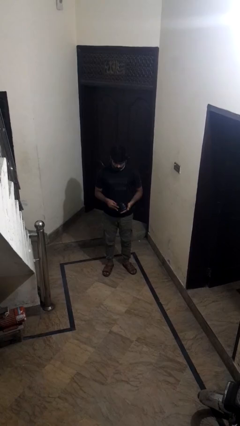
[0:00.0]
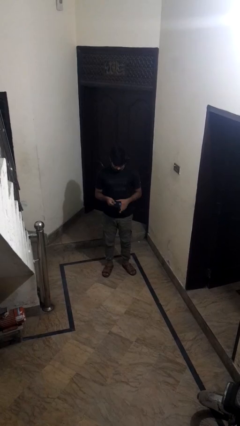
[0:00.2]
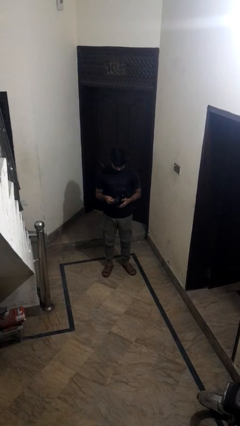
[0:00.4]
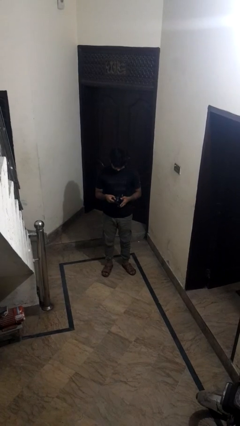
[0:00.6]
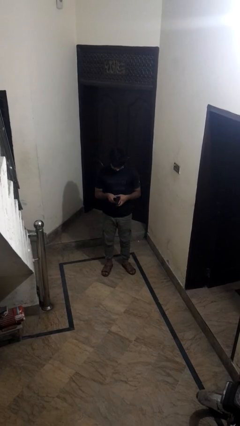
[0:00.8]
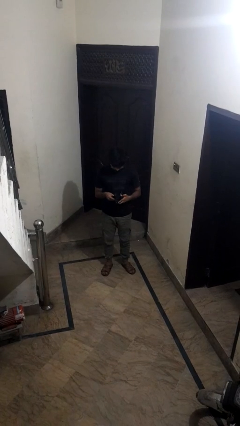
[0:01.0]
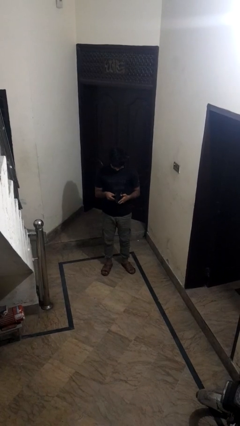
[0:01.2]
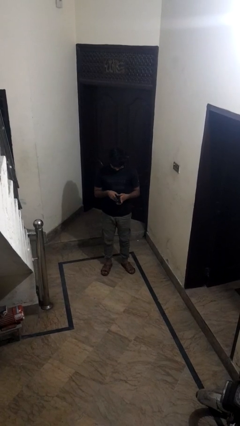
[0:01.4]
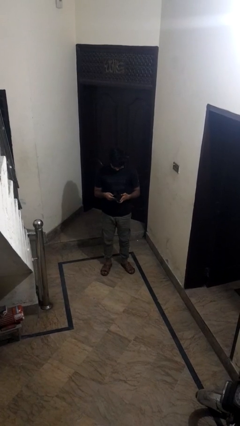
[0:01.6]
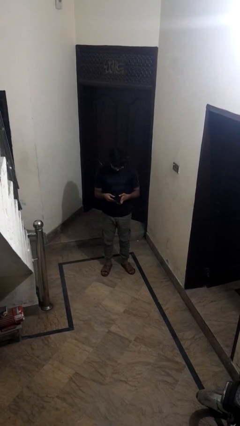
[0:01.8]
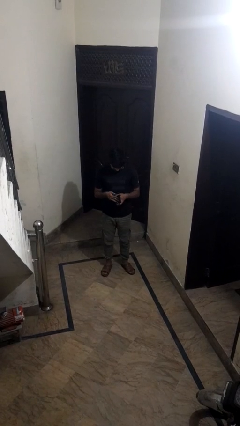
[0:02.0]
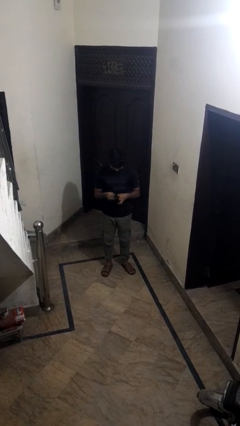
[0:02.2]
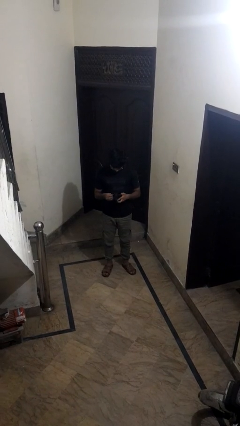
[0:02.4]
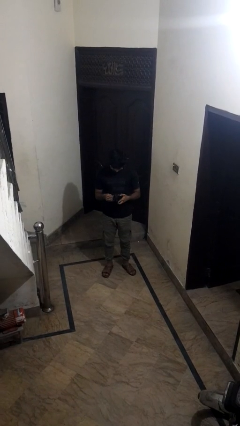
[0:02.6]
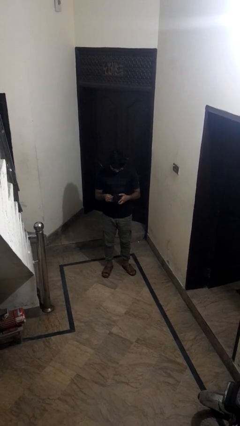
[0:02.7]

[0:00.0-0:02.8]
person searches in purse

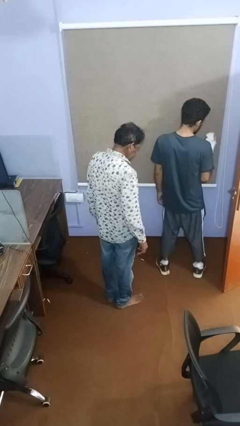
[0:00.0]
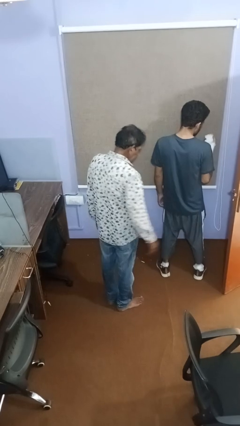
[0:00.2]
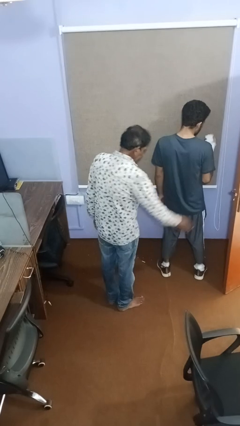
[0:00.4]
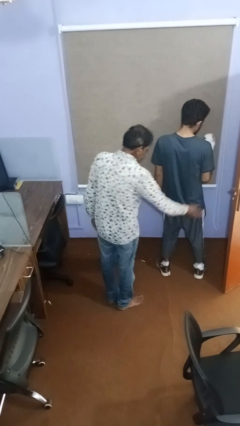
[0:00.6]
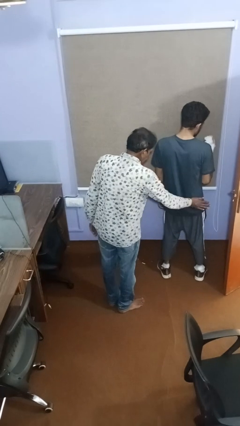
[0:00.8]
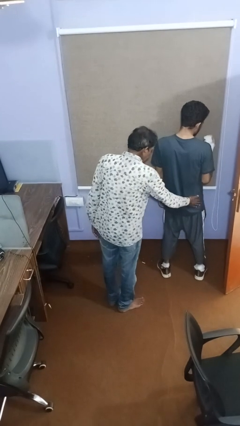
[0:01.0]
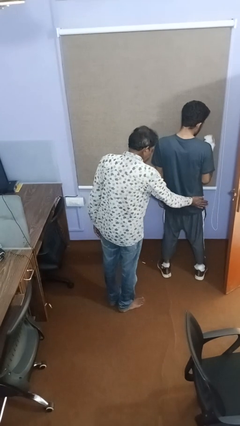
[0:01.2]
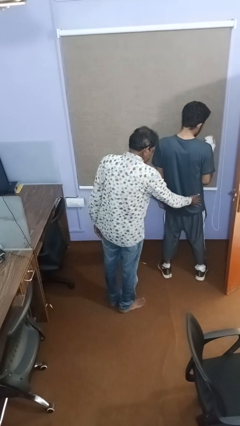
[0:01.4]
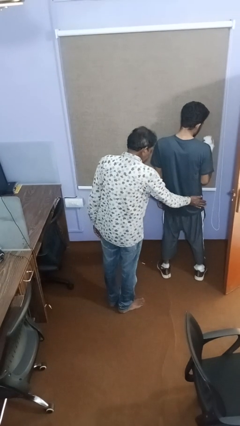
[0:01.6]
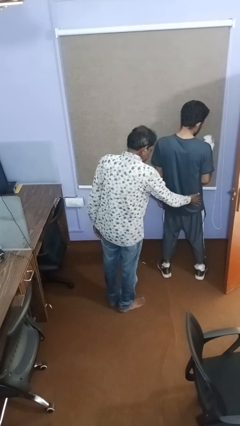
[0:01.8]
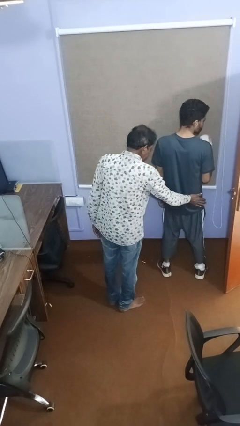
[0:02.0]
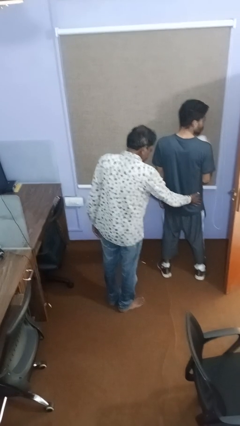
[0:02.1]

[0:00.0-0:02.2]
person touches back of person

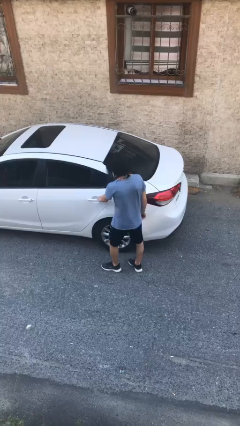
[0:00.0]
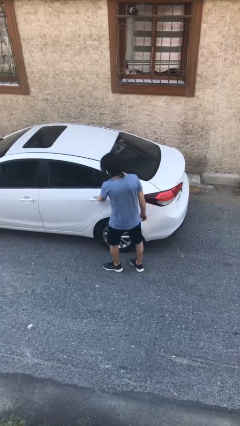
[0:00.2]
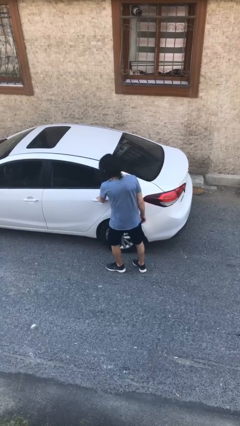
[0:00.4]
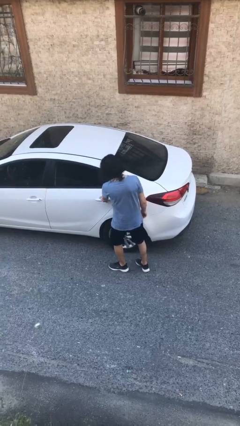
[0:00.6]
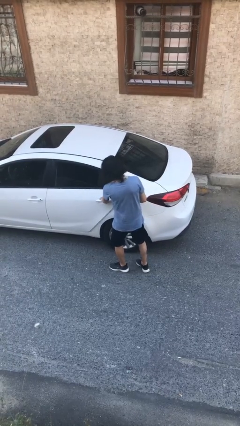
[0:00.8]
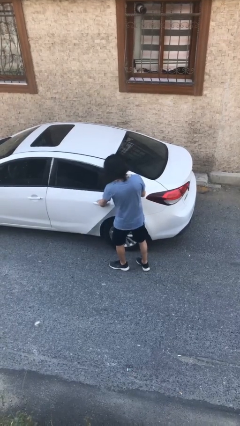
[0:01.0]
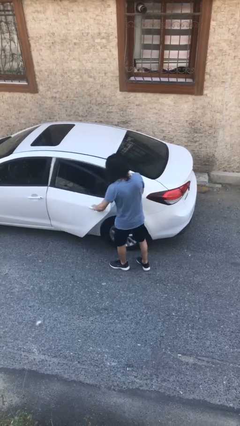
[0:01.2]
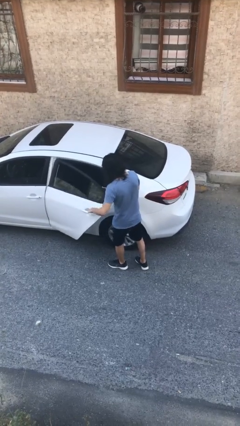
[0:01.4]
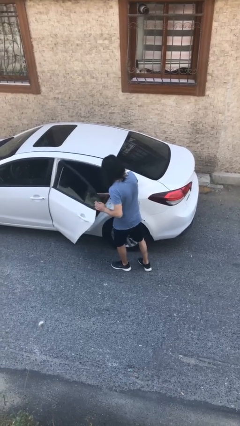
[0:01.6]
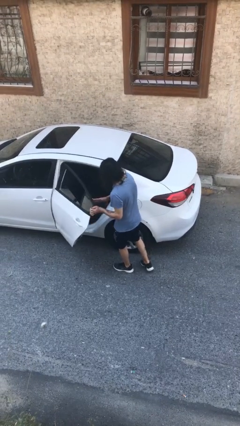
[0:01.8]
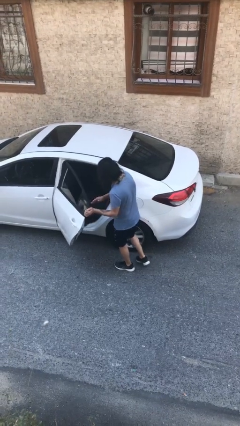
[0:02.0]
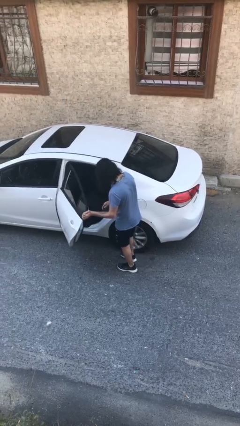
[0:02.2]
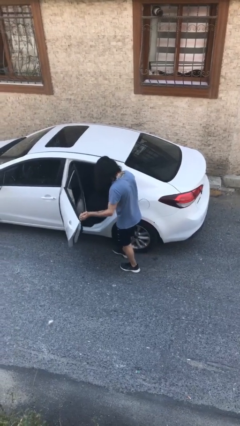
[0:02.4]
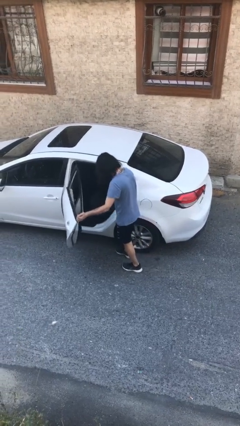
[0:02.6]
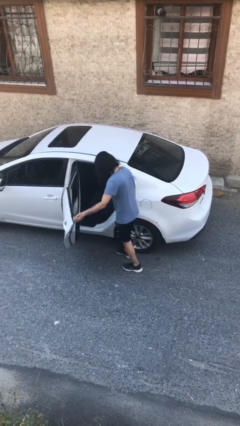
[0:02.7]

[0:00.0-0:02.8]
person opens car door

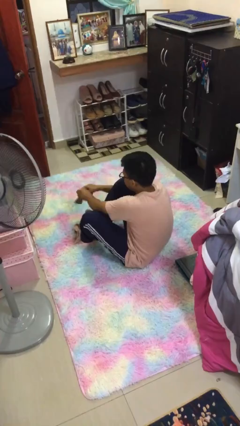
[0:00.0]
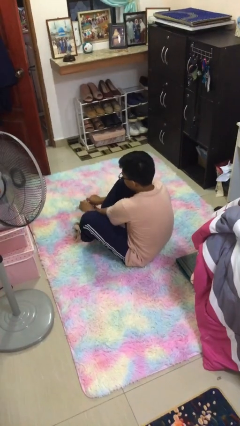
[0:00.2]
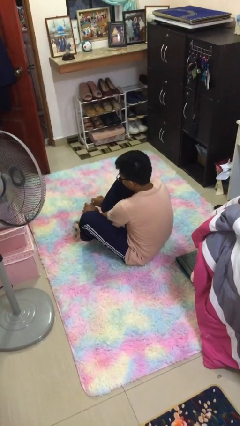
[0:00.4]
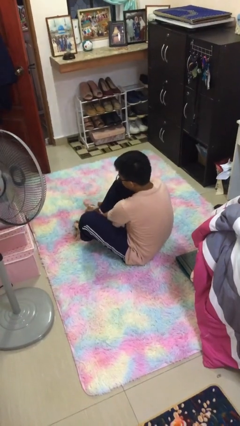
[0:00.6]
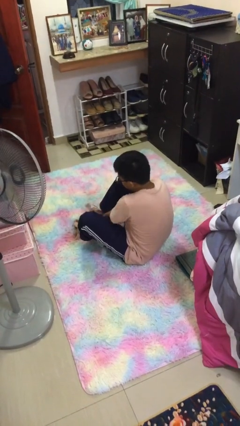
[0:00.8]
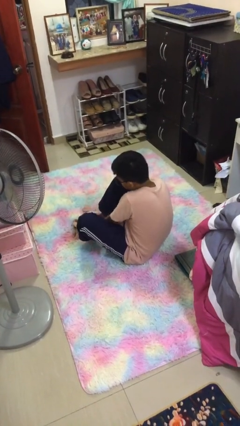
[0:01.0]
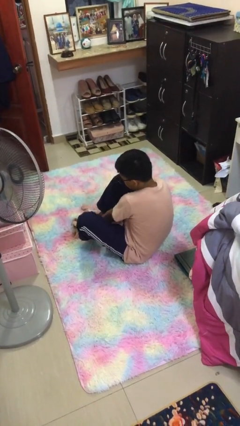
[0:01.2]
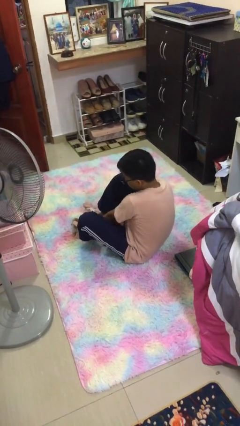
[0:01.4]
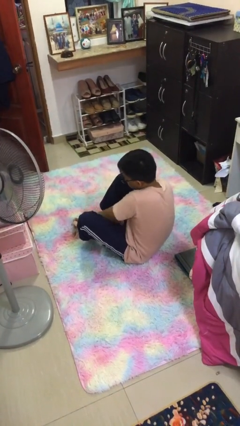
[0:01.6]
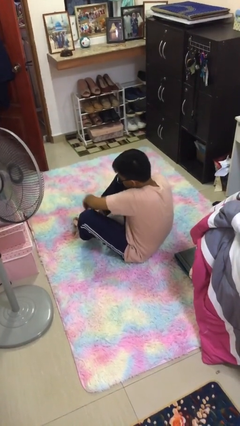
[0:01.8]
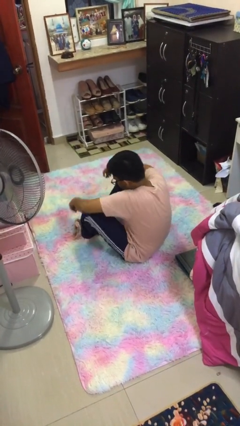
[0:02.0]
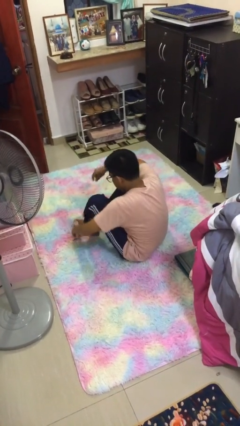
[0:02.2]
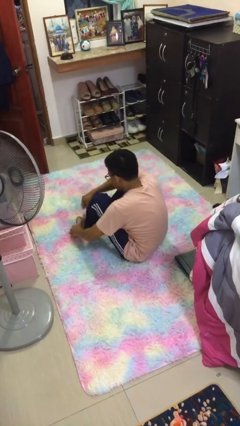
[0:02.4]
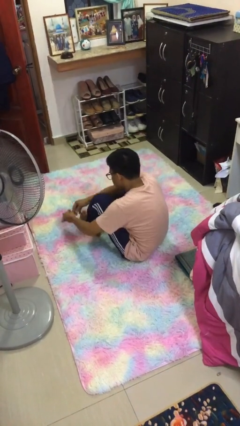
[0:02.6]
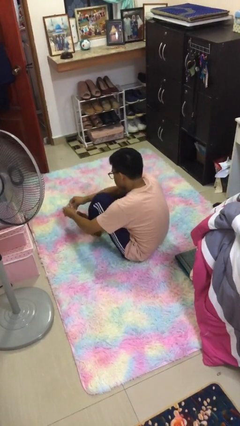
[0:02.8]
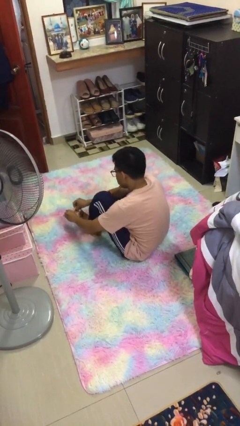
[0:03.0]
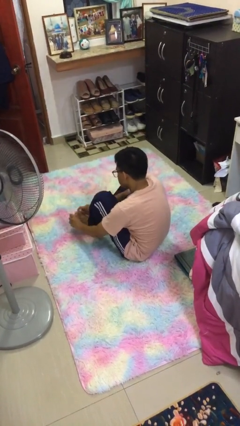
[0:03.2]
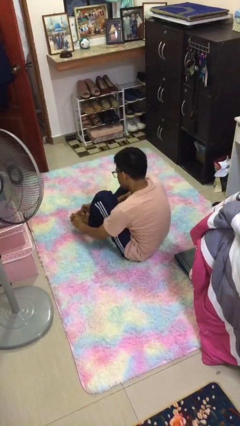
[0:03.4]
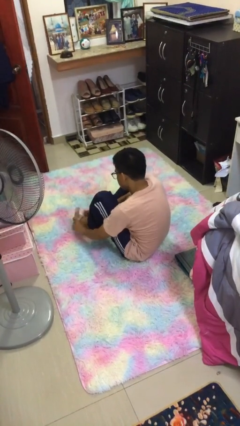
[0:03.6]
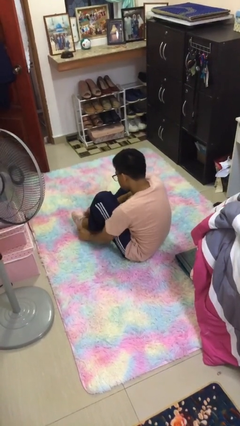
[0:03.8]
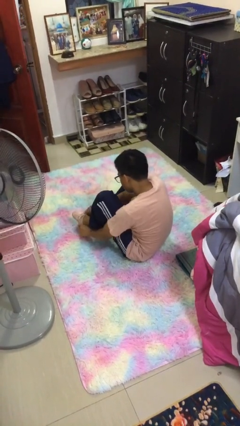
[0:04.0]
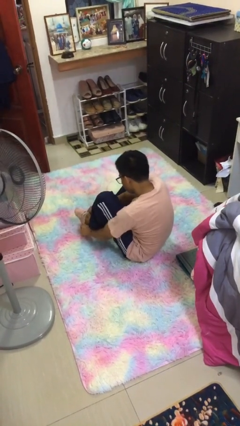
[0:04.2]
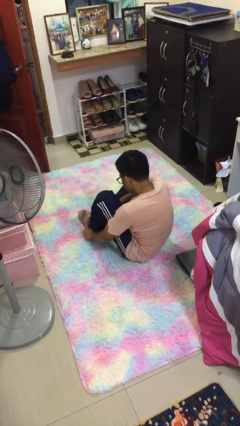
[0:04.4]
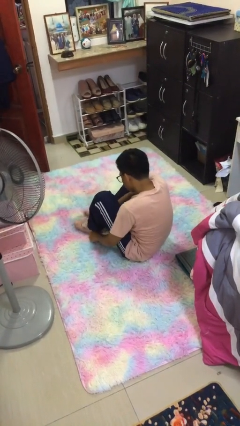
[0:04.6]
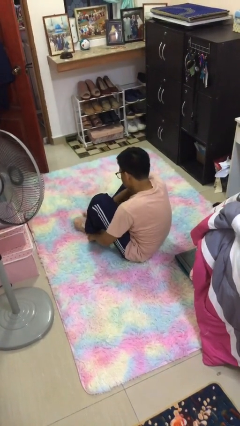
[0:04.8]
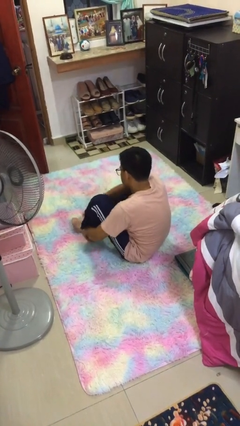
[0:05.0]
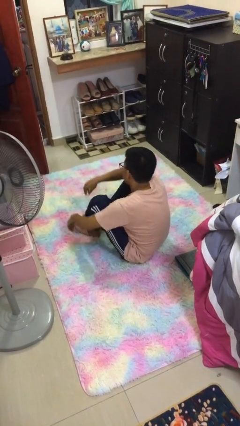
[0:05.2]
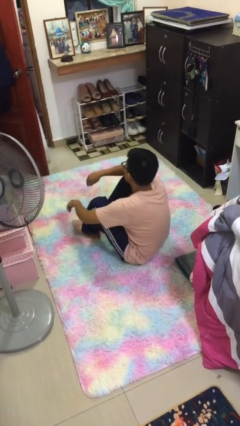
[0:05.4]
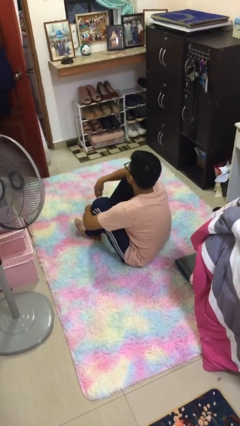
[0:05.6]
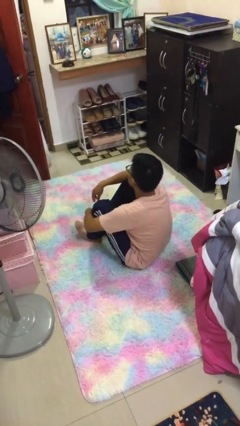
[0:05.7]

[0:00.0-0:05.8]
person puts on socks

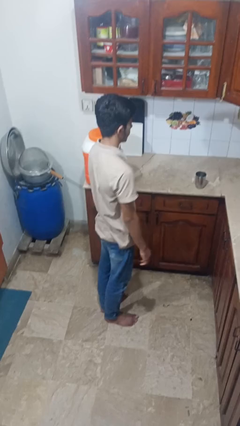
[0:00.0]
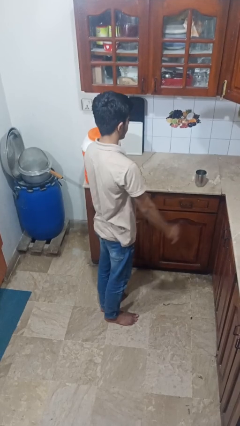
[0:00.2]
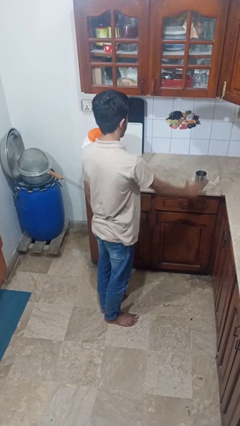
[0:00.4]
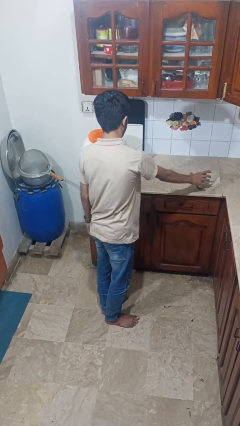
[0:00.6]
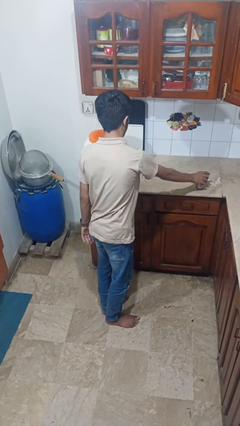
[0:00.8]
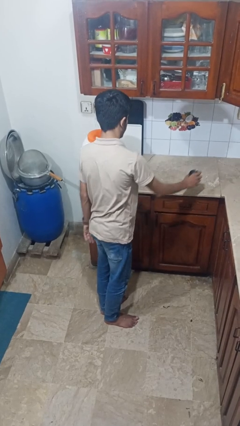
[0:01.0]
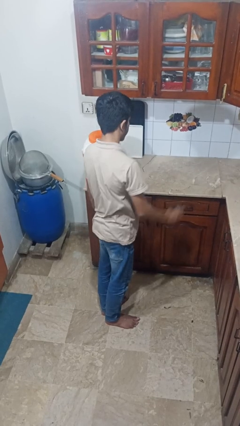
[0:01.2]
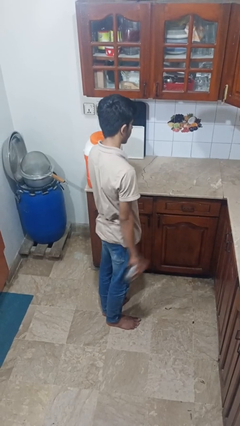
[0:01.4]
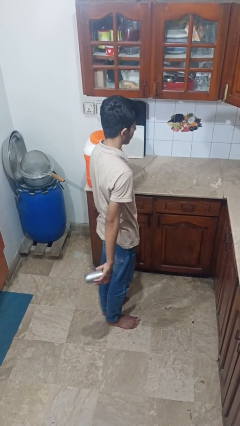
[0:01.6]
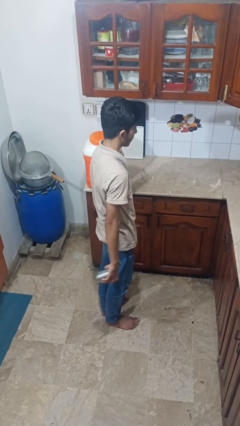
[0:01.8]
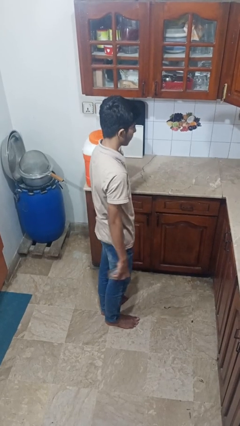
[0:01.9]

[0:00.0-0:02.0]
person picks up object from countertop

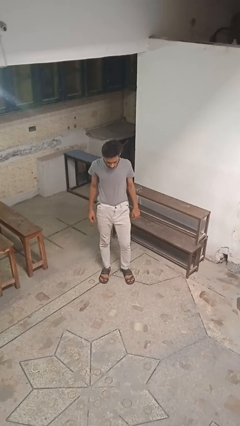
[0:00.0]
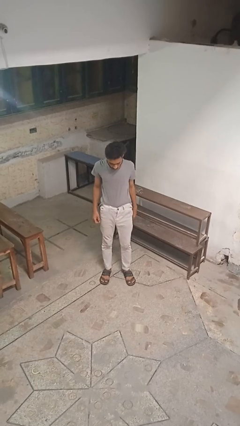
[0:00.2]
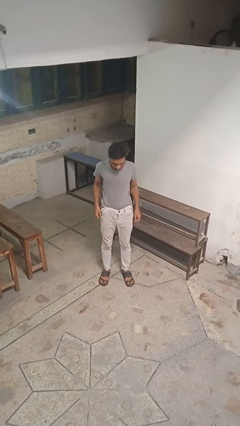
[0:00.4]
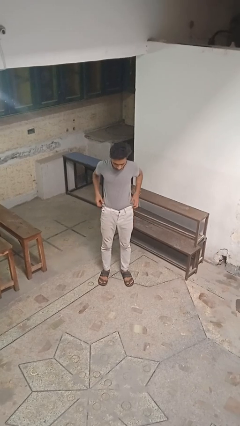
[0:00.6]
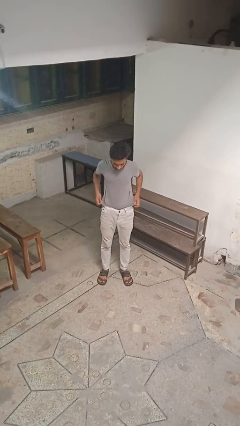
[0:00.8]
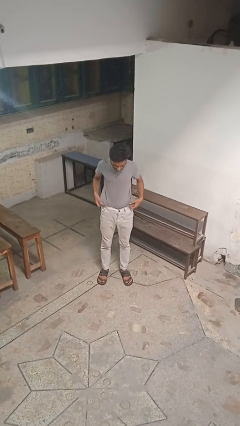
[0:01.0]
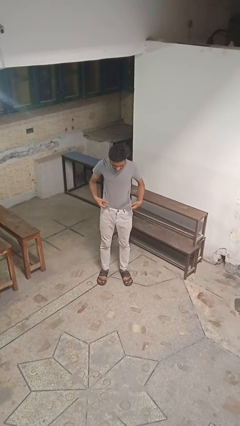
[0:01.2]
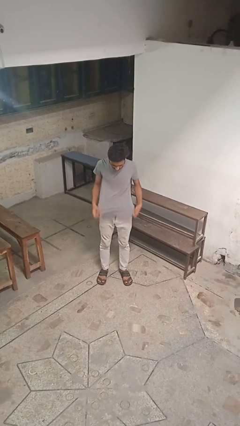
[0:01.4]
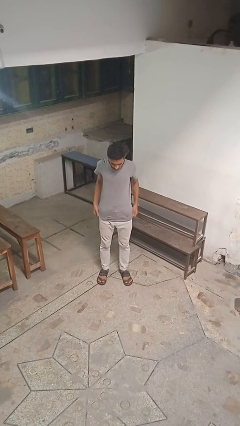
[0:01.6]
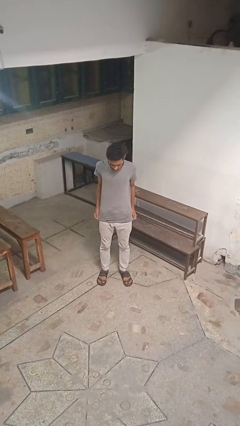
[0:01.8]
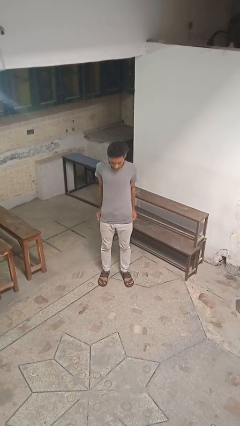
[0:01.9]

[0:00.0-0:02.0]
person untucks shirt
